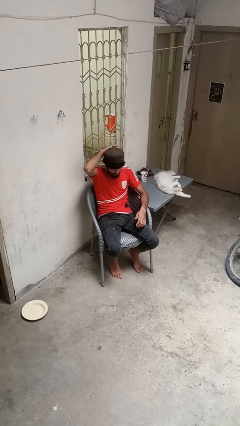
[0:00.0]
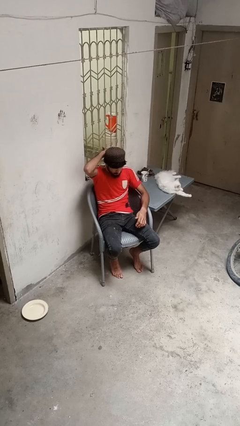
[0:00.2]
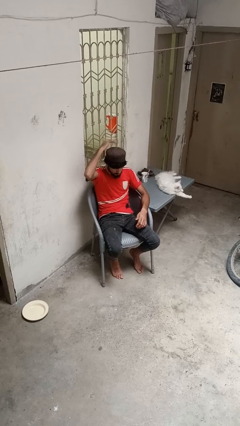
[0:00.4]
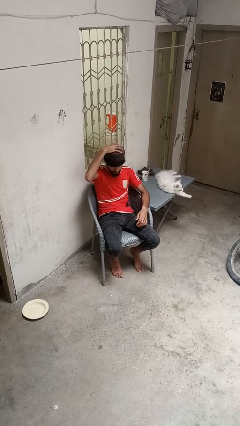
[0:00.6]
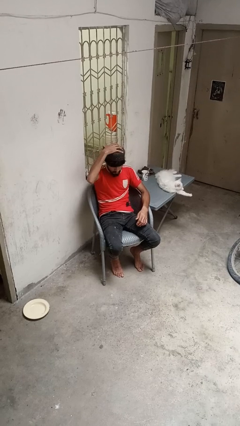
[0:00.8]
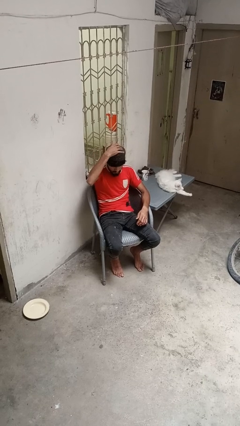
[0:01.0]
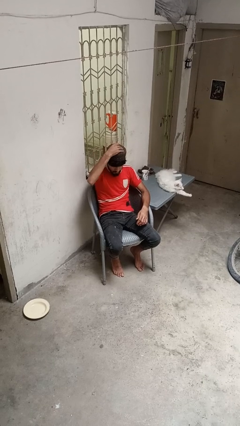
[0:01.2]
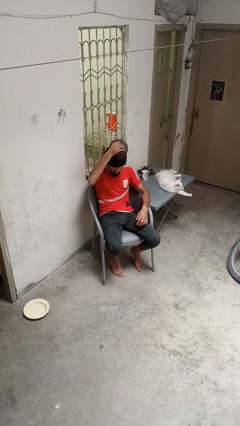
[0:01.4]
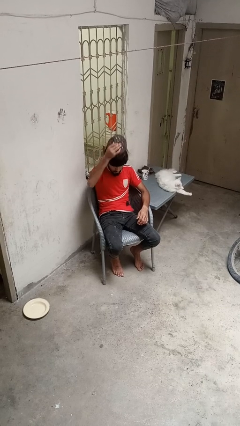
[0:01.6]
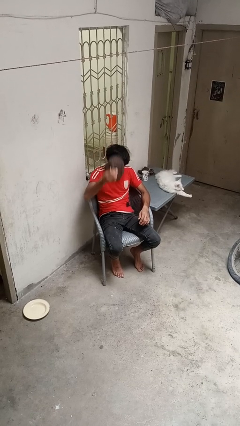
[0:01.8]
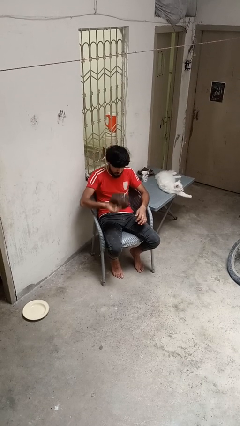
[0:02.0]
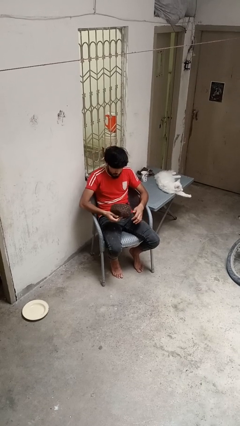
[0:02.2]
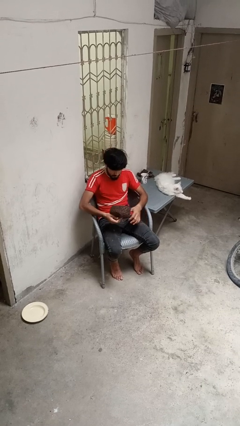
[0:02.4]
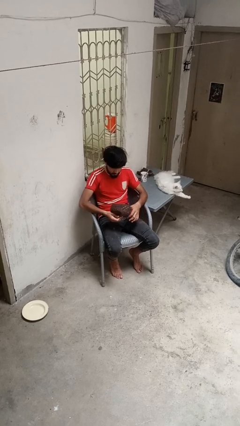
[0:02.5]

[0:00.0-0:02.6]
person takes off hat

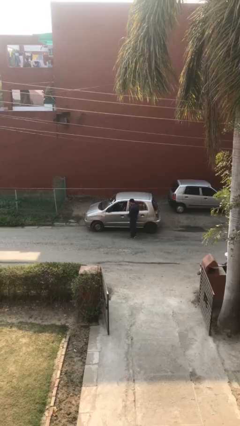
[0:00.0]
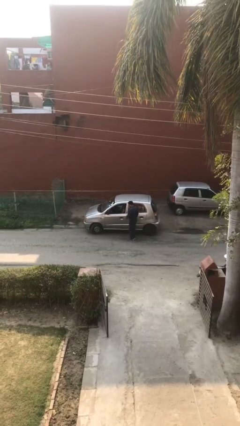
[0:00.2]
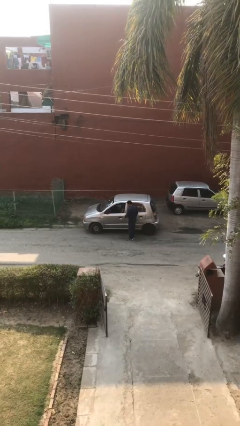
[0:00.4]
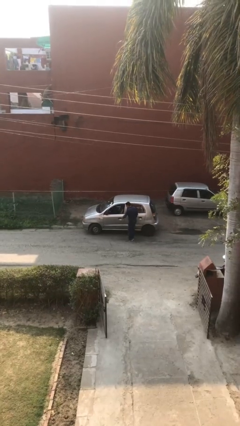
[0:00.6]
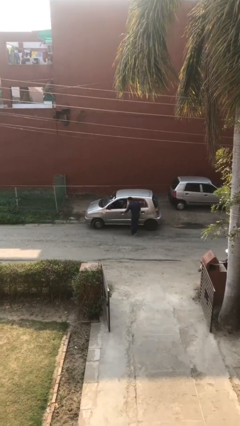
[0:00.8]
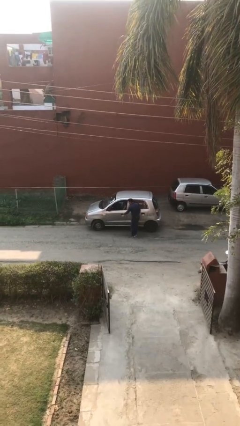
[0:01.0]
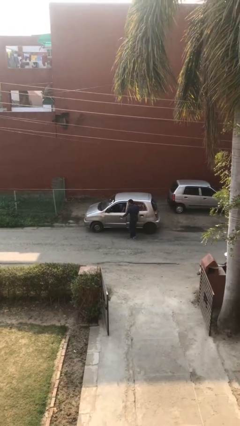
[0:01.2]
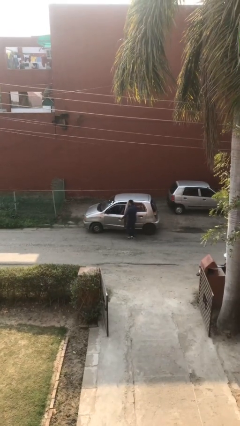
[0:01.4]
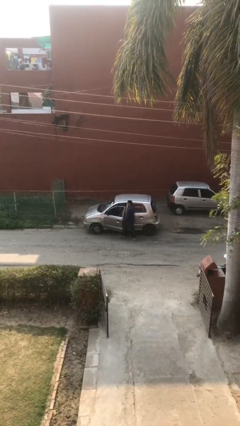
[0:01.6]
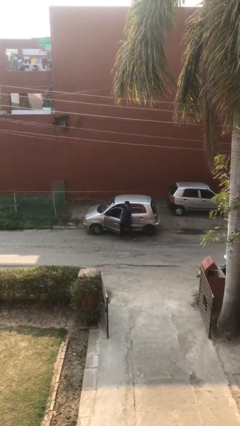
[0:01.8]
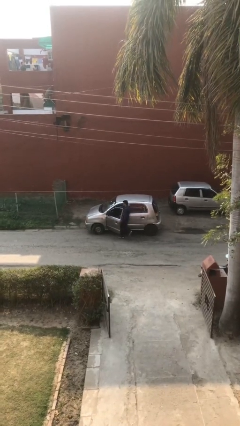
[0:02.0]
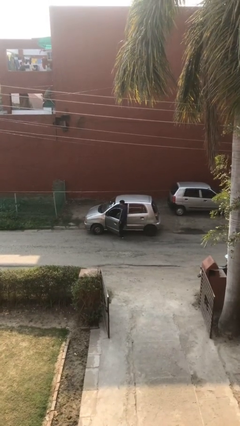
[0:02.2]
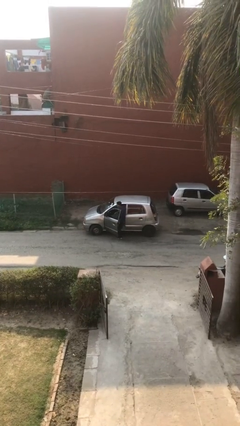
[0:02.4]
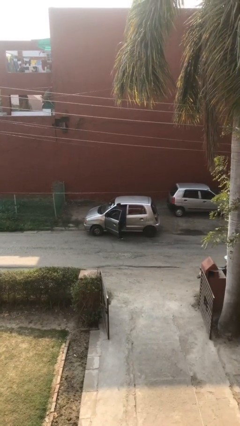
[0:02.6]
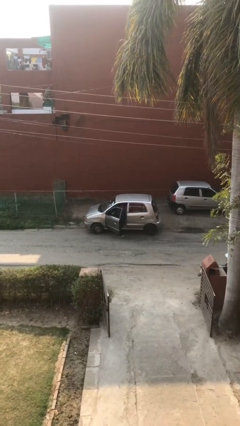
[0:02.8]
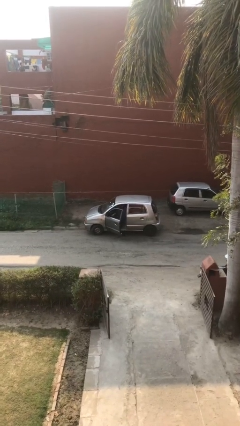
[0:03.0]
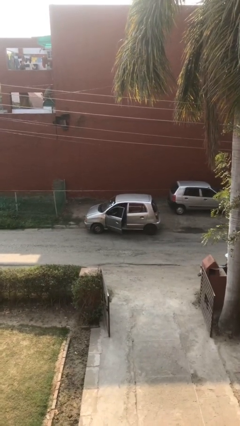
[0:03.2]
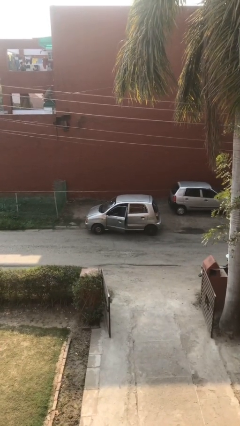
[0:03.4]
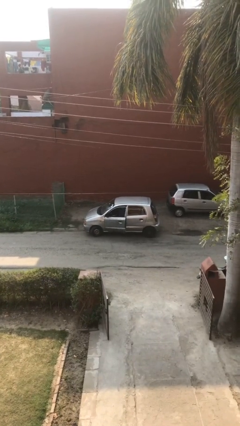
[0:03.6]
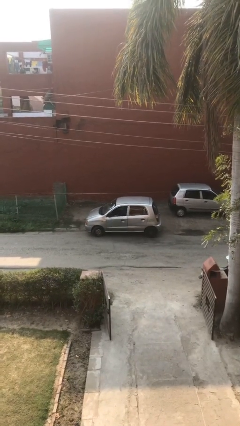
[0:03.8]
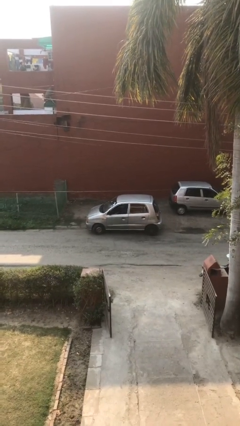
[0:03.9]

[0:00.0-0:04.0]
car picks up person

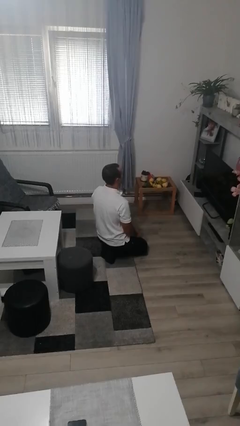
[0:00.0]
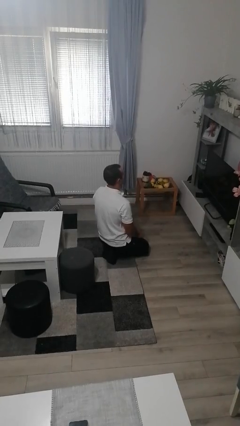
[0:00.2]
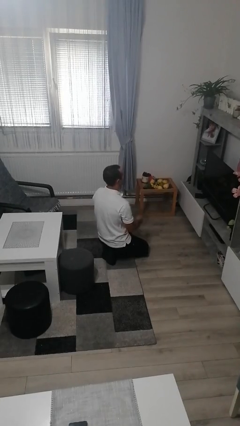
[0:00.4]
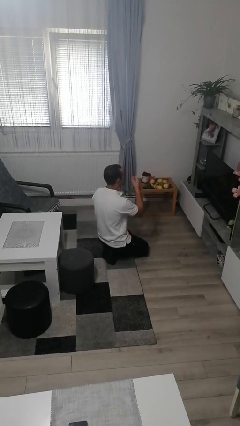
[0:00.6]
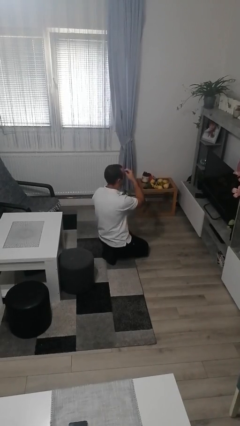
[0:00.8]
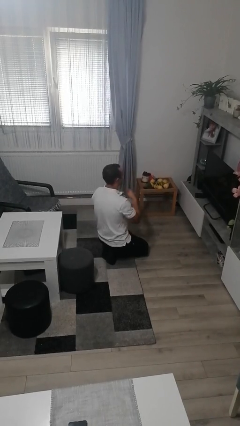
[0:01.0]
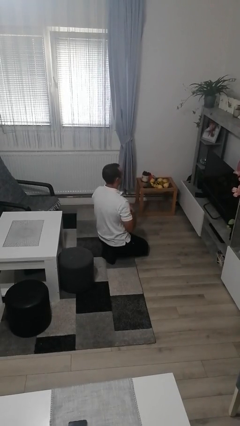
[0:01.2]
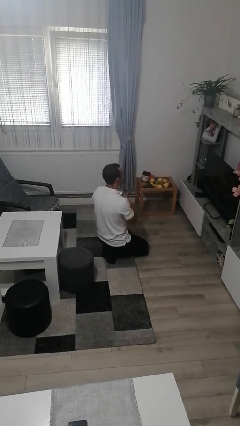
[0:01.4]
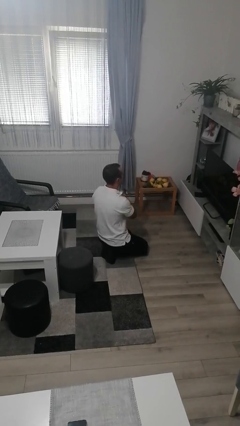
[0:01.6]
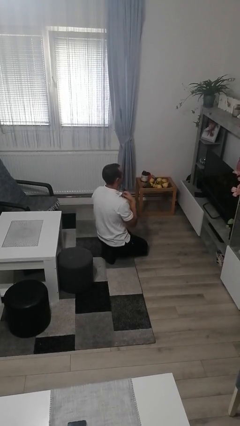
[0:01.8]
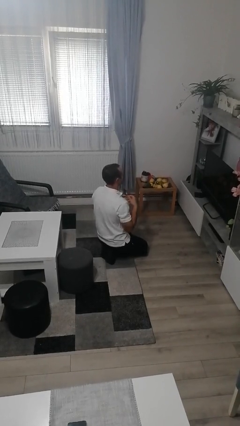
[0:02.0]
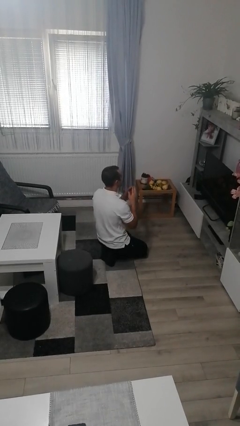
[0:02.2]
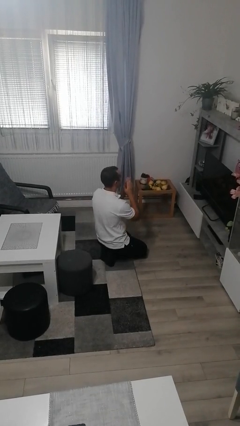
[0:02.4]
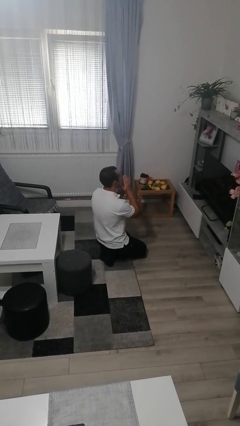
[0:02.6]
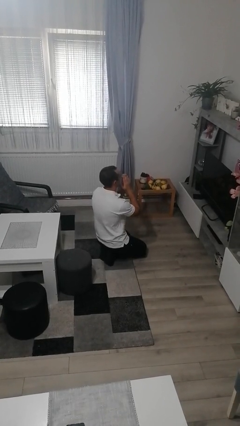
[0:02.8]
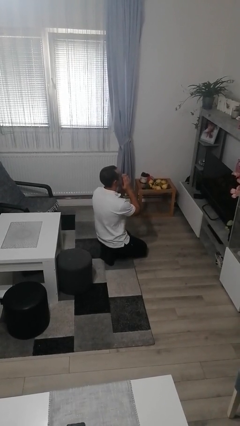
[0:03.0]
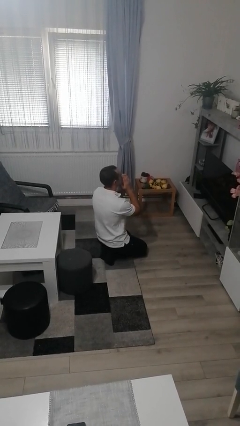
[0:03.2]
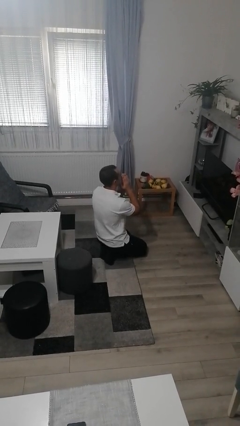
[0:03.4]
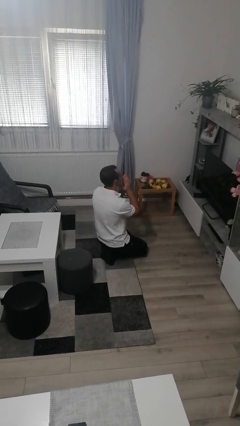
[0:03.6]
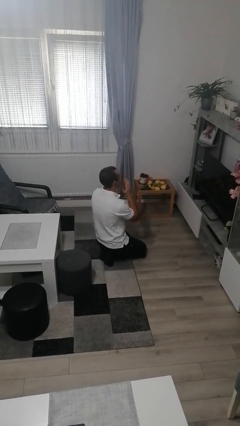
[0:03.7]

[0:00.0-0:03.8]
person prays

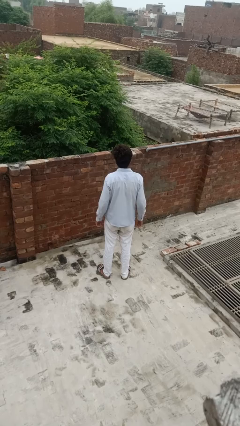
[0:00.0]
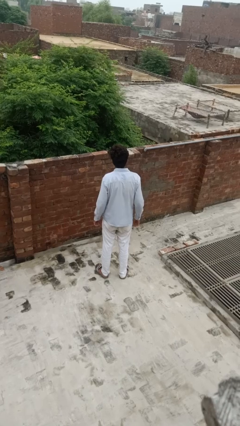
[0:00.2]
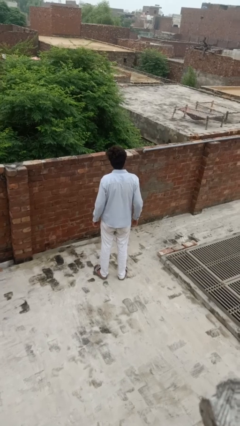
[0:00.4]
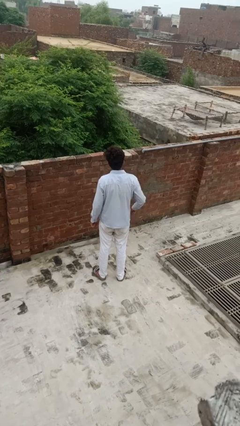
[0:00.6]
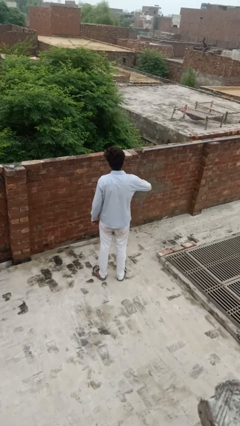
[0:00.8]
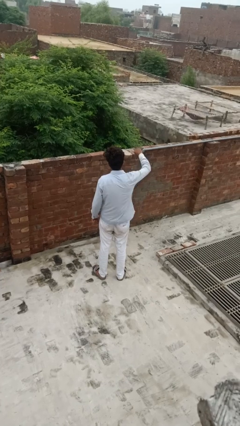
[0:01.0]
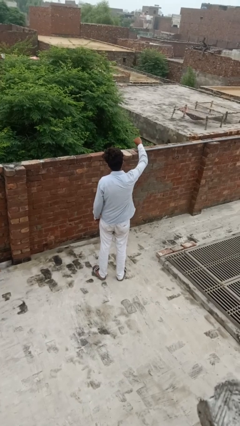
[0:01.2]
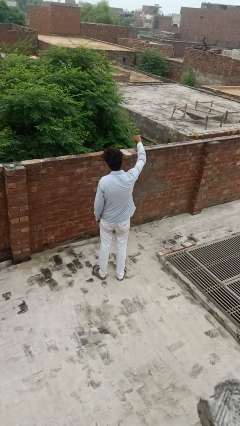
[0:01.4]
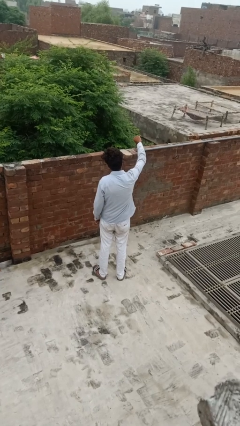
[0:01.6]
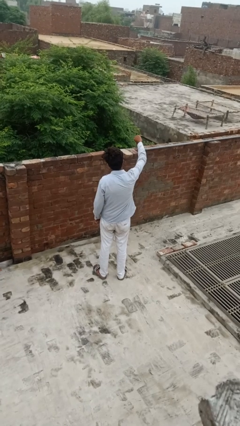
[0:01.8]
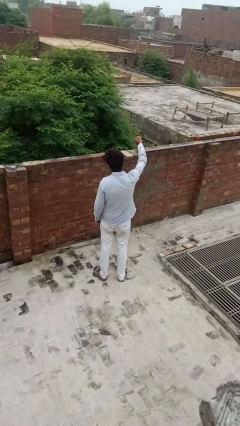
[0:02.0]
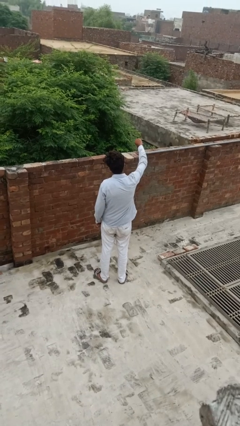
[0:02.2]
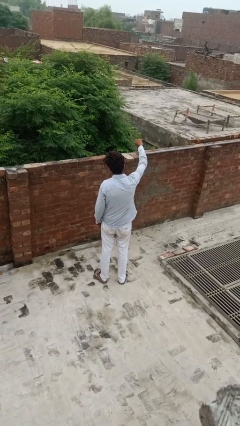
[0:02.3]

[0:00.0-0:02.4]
person gestures thumbs down

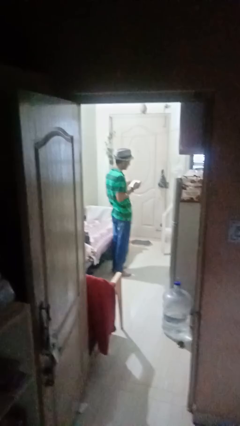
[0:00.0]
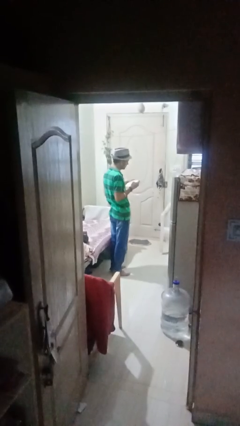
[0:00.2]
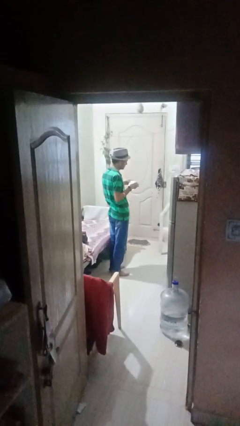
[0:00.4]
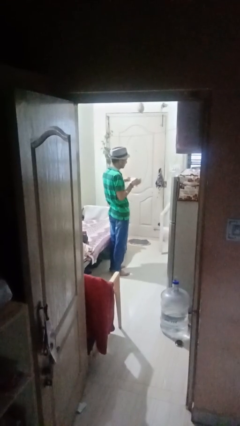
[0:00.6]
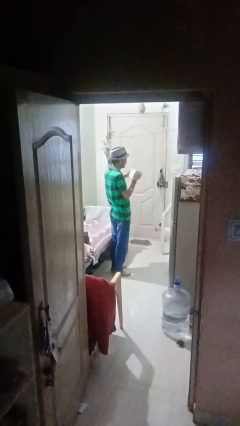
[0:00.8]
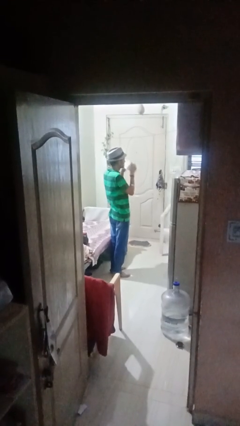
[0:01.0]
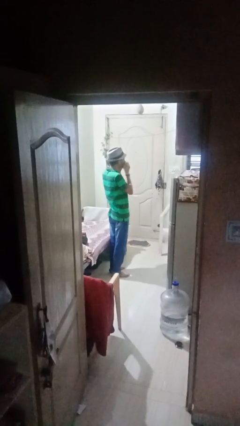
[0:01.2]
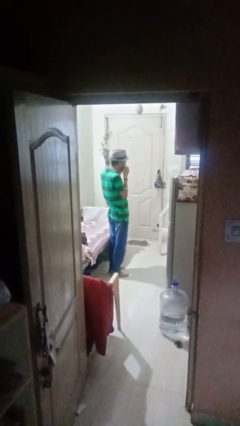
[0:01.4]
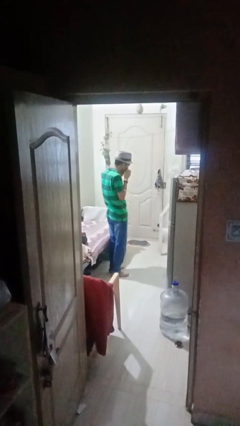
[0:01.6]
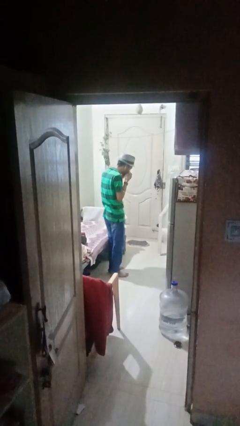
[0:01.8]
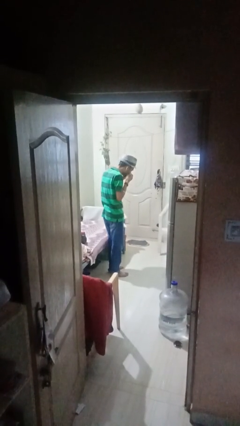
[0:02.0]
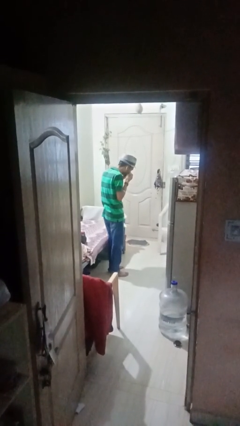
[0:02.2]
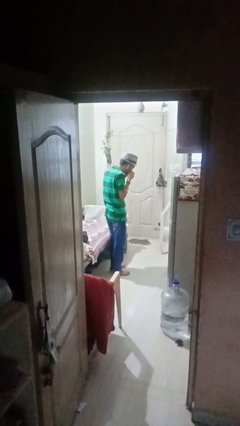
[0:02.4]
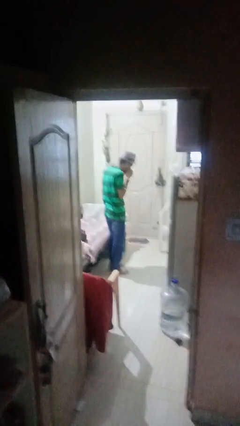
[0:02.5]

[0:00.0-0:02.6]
person blows nose

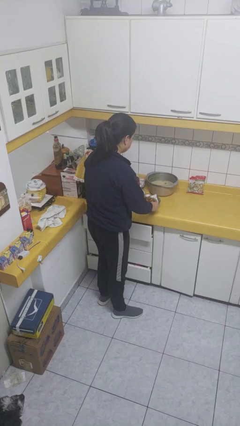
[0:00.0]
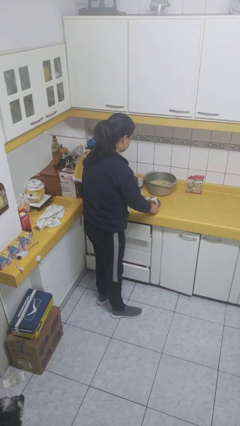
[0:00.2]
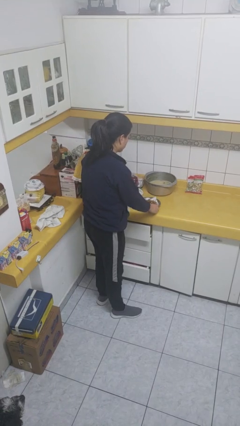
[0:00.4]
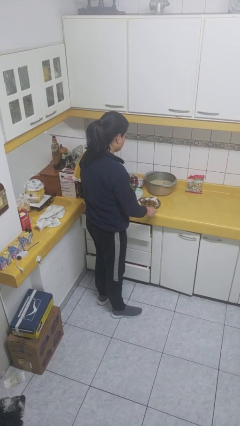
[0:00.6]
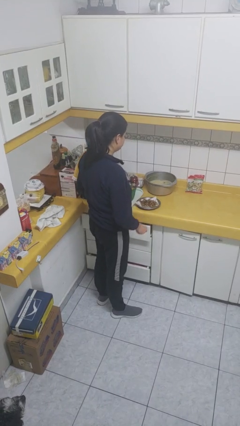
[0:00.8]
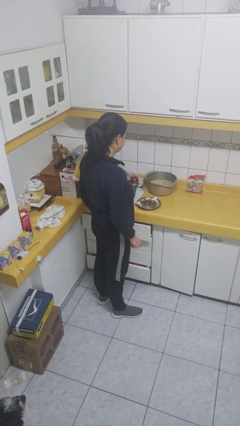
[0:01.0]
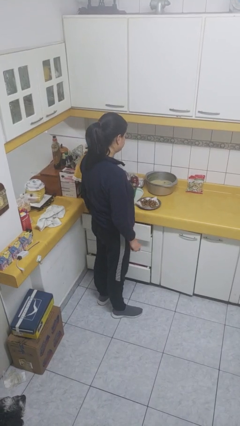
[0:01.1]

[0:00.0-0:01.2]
person puts down object on countertop

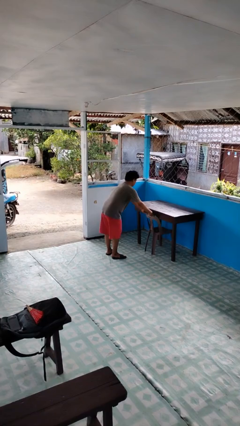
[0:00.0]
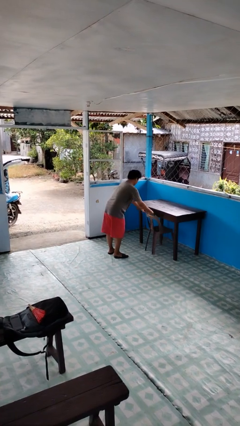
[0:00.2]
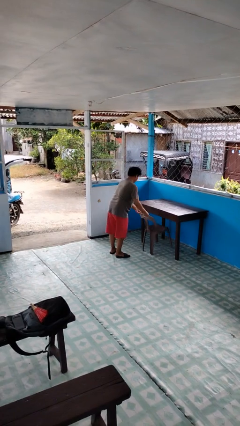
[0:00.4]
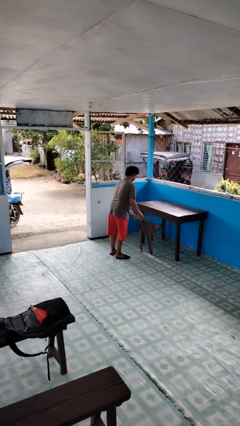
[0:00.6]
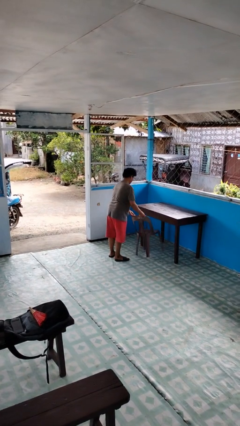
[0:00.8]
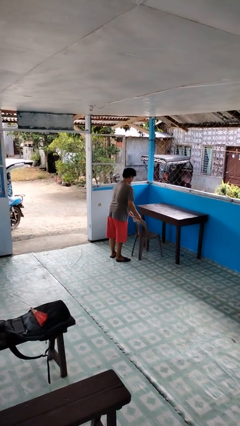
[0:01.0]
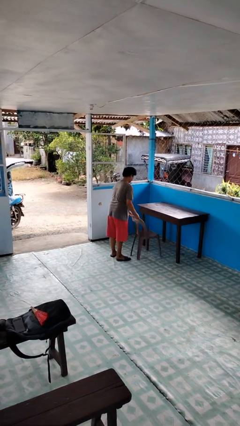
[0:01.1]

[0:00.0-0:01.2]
person pulls out chair
